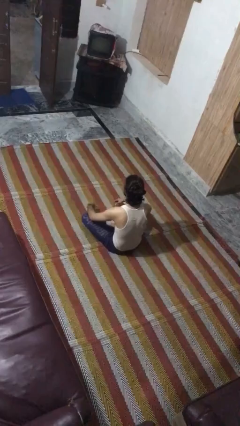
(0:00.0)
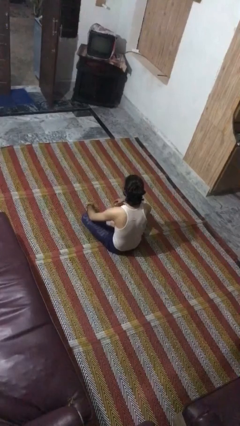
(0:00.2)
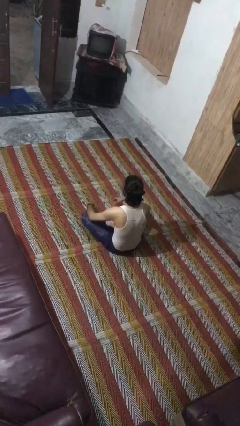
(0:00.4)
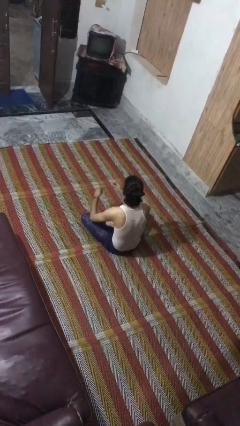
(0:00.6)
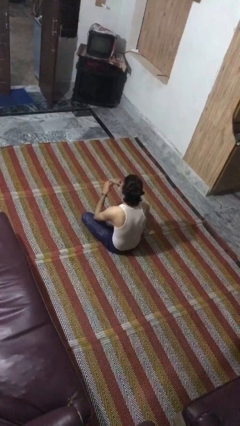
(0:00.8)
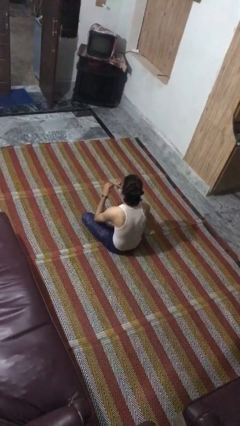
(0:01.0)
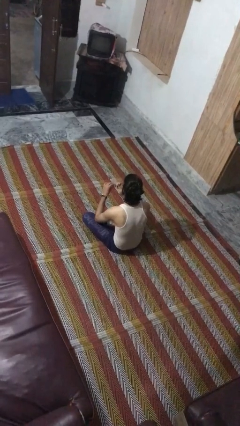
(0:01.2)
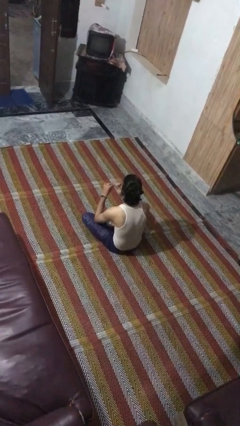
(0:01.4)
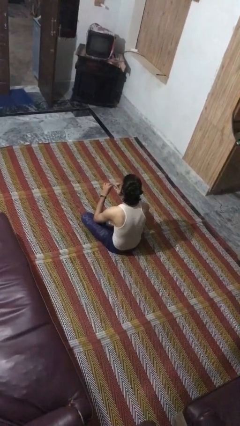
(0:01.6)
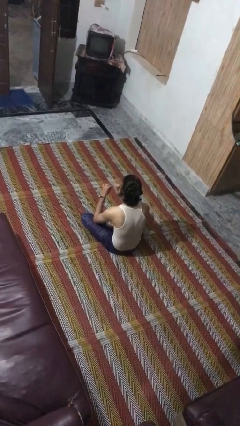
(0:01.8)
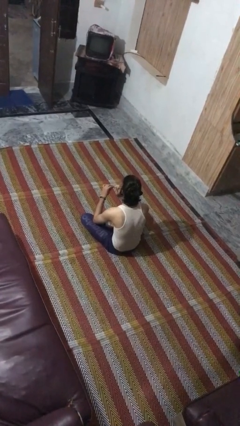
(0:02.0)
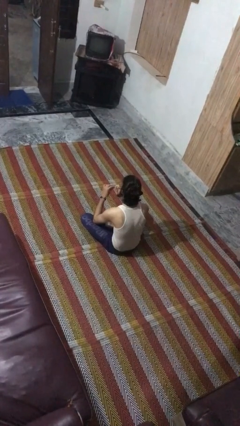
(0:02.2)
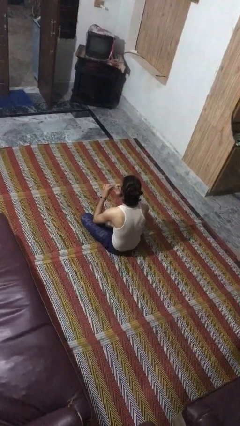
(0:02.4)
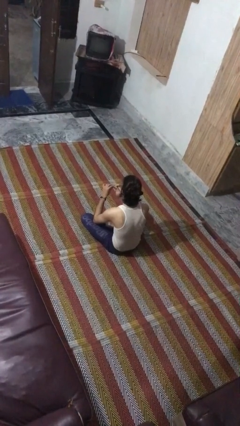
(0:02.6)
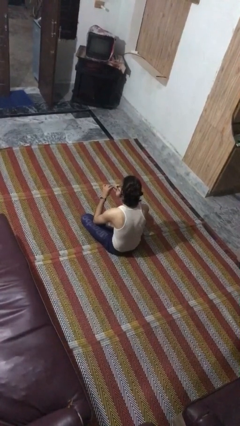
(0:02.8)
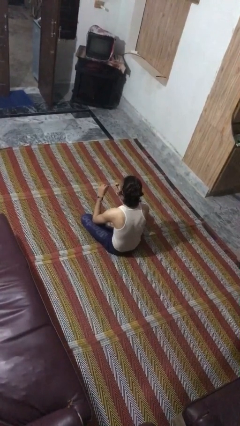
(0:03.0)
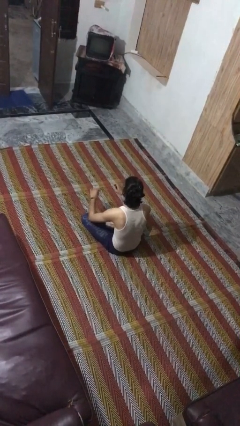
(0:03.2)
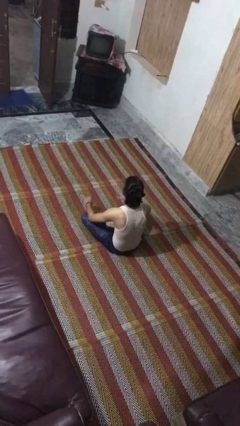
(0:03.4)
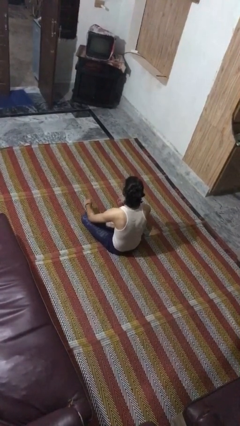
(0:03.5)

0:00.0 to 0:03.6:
person files fingernails

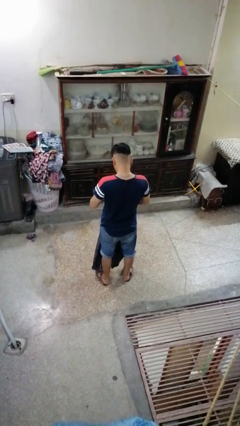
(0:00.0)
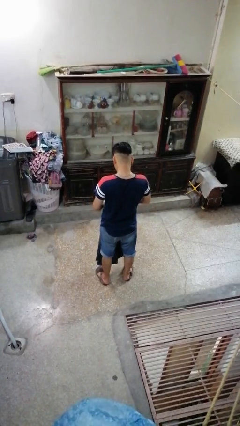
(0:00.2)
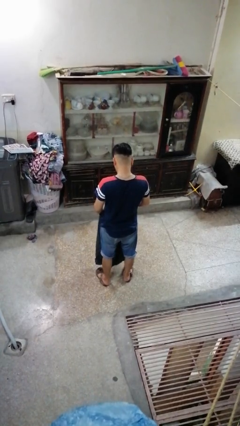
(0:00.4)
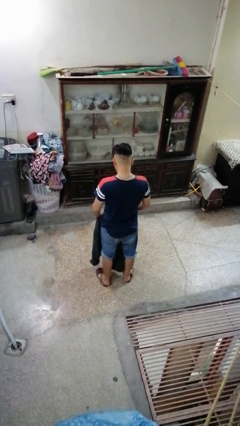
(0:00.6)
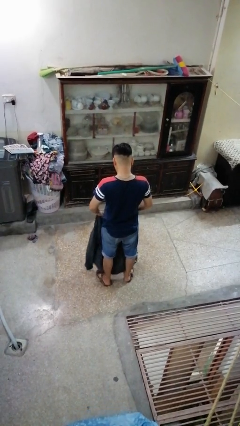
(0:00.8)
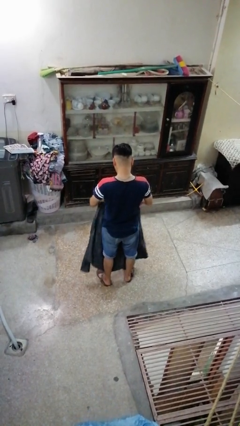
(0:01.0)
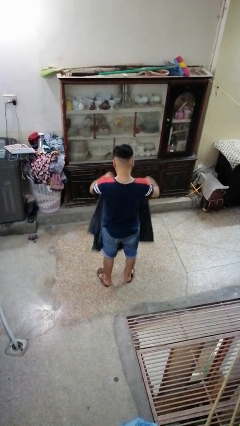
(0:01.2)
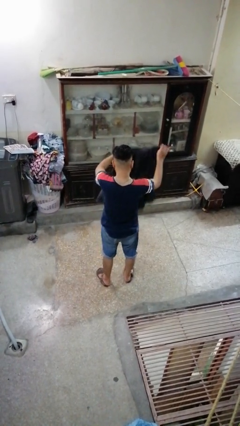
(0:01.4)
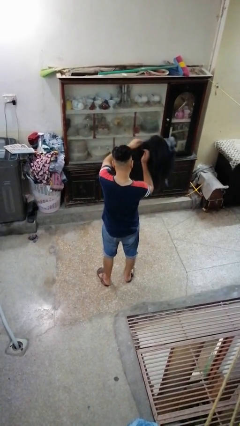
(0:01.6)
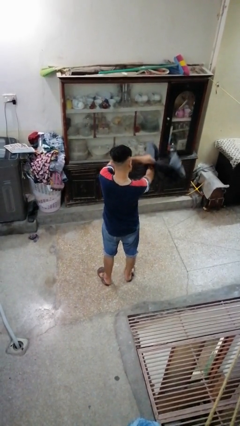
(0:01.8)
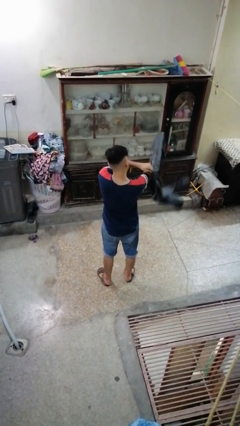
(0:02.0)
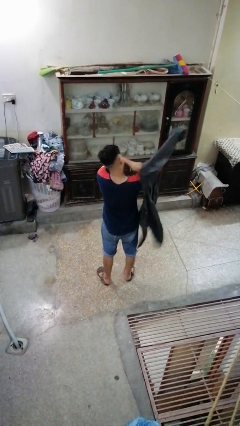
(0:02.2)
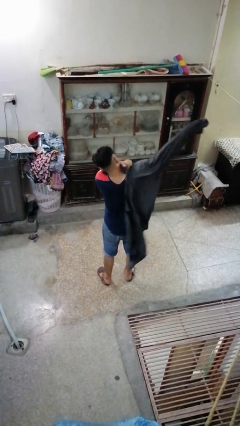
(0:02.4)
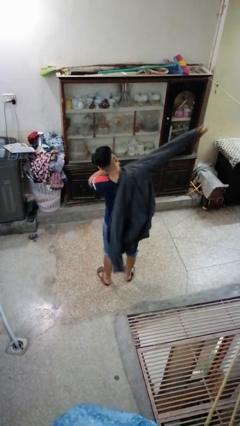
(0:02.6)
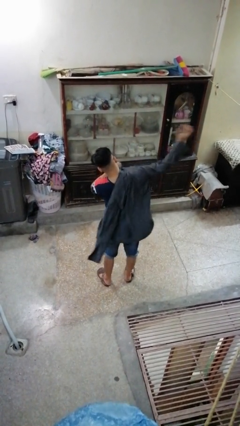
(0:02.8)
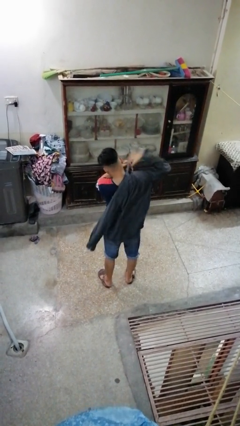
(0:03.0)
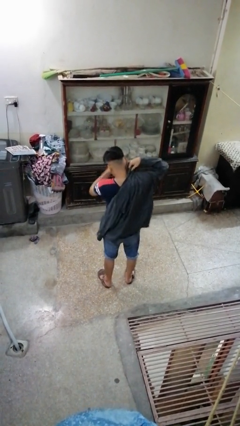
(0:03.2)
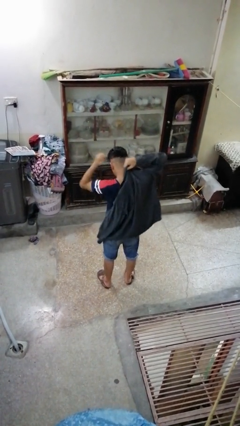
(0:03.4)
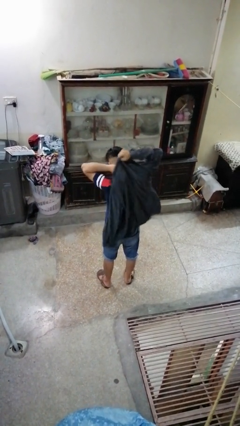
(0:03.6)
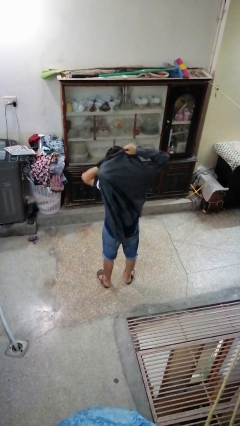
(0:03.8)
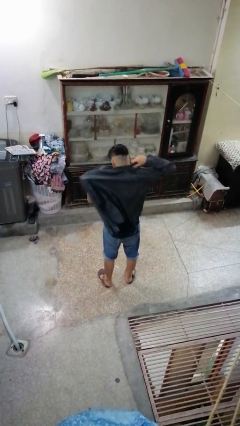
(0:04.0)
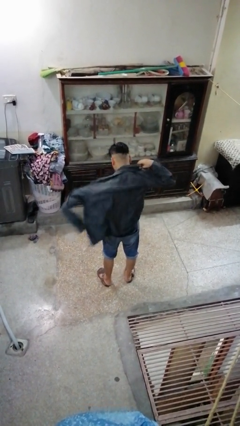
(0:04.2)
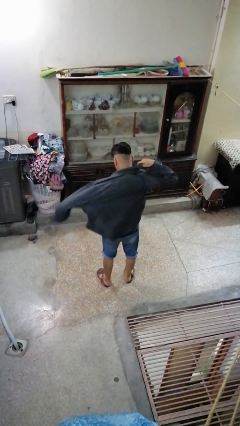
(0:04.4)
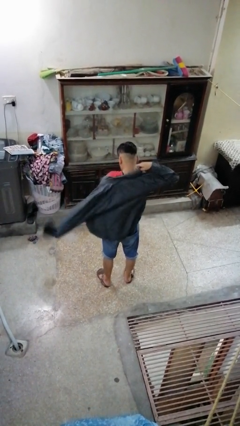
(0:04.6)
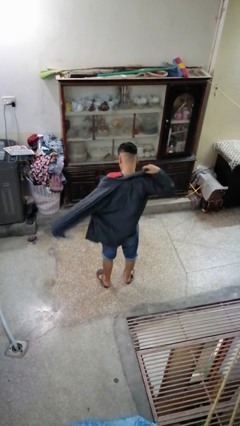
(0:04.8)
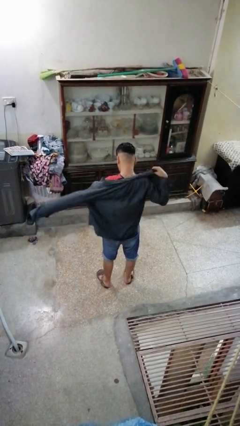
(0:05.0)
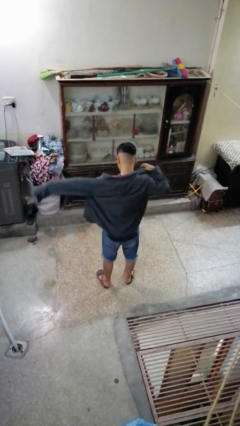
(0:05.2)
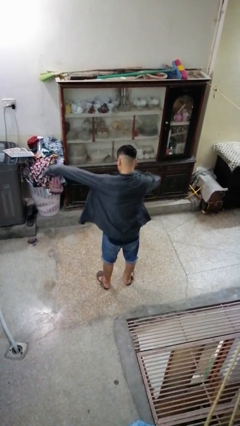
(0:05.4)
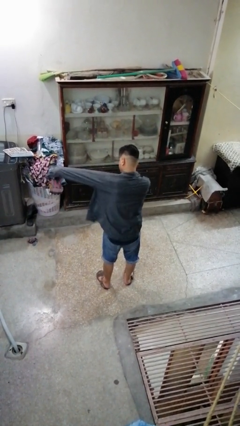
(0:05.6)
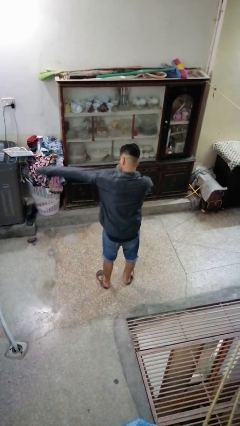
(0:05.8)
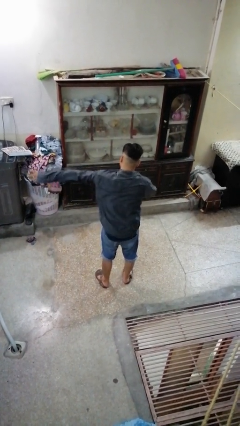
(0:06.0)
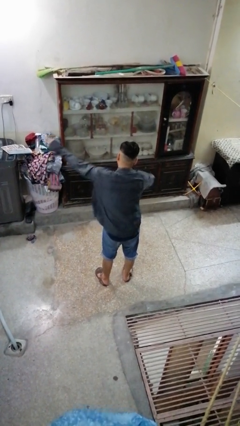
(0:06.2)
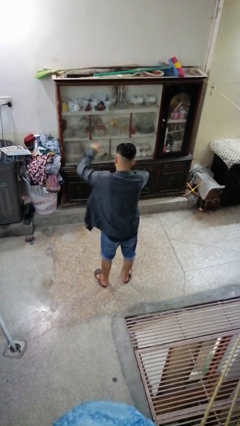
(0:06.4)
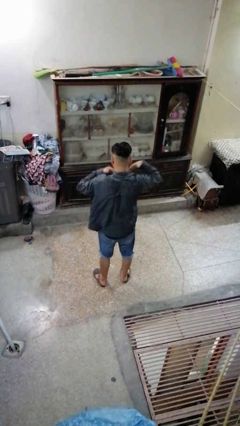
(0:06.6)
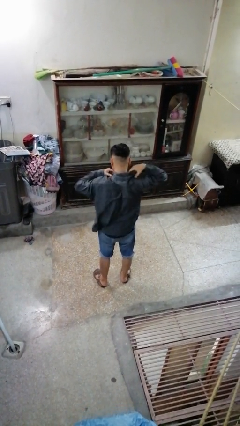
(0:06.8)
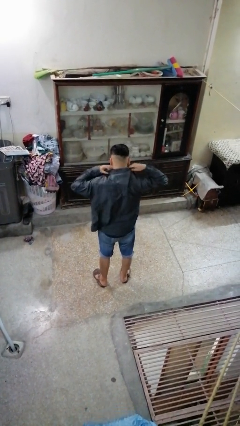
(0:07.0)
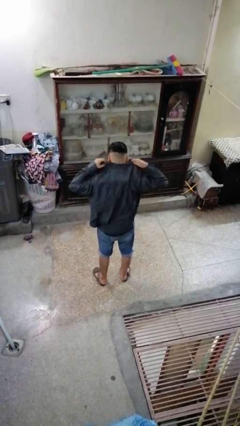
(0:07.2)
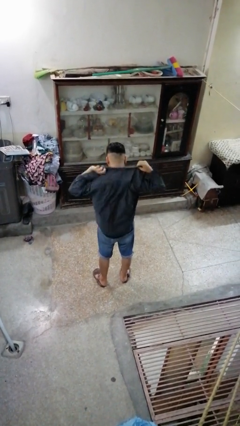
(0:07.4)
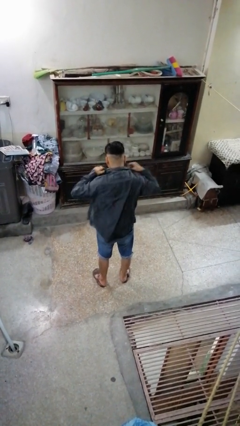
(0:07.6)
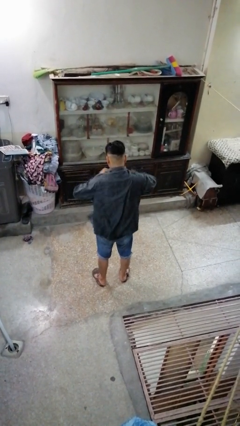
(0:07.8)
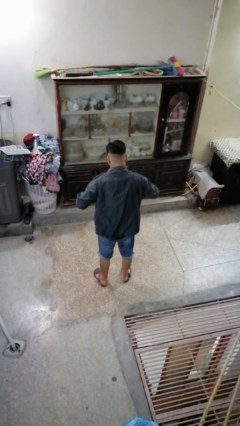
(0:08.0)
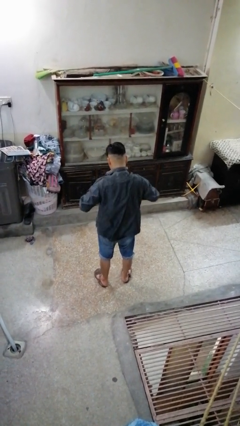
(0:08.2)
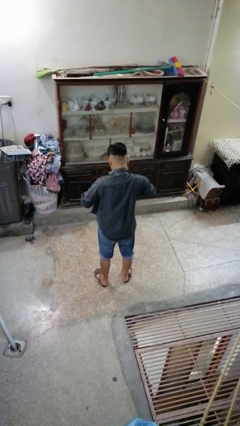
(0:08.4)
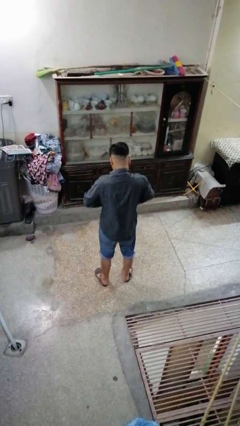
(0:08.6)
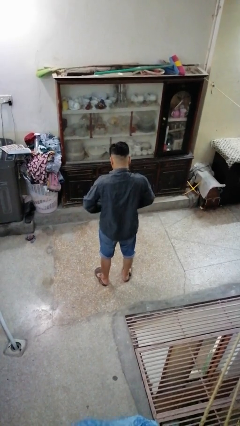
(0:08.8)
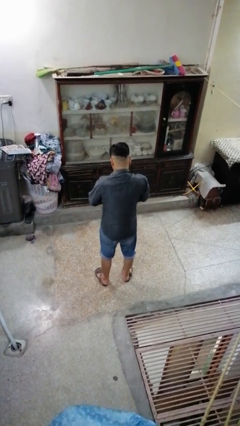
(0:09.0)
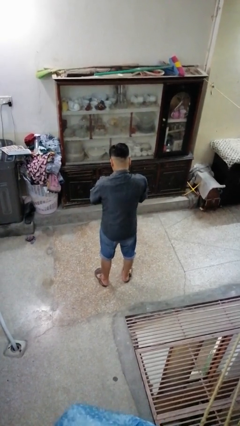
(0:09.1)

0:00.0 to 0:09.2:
person puts on shirt

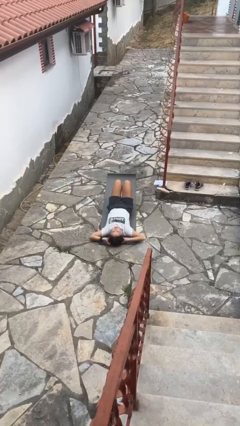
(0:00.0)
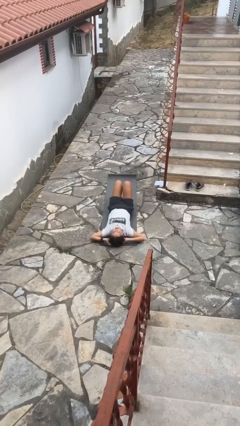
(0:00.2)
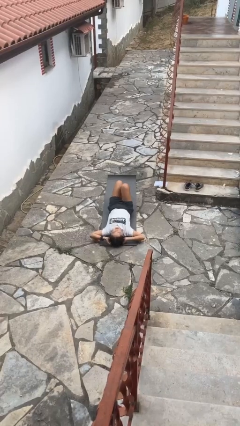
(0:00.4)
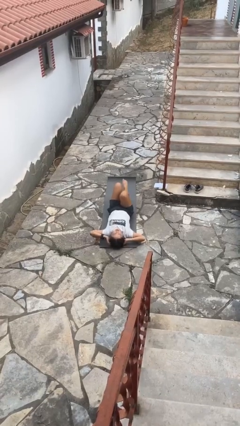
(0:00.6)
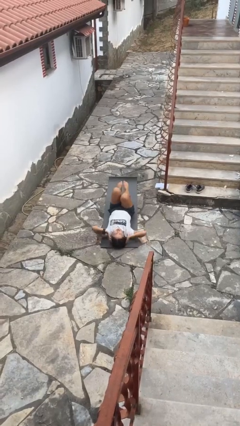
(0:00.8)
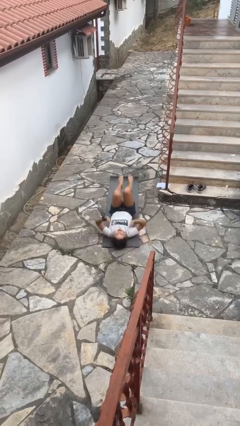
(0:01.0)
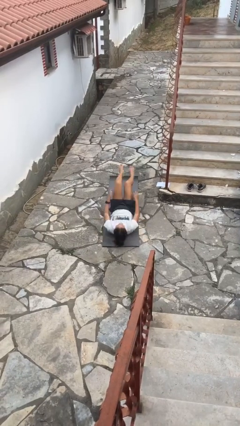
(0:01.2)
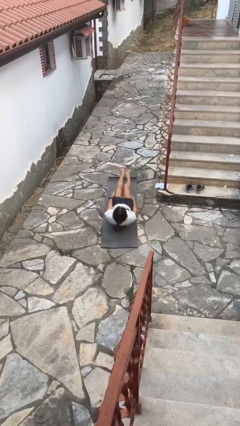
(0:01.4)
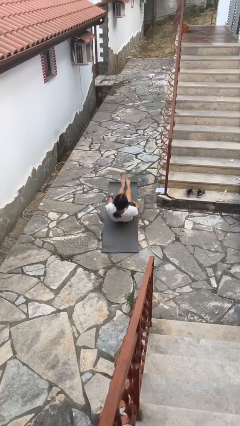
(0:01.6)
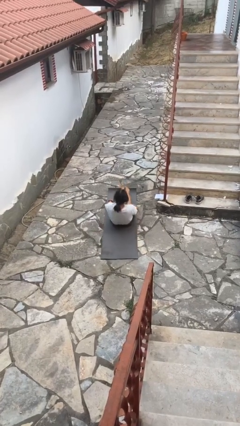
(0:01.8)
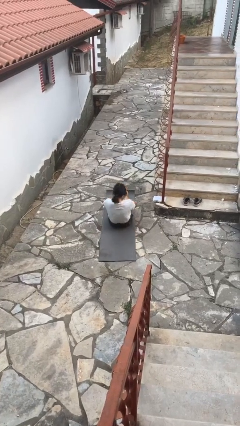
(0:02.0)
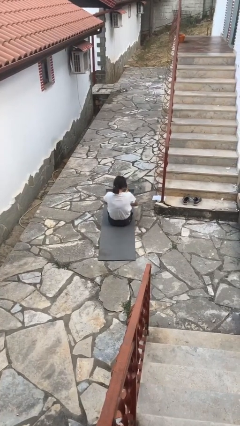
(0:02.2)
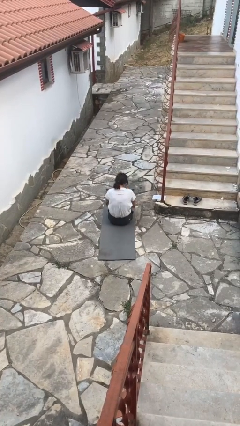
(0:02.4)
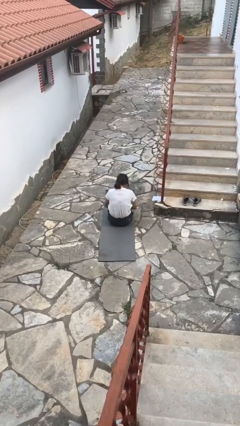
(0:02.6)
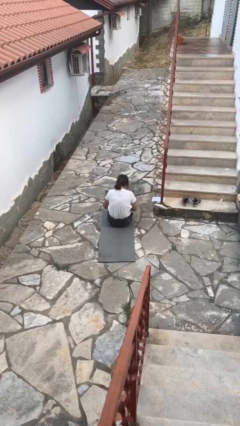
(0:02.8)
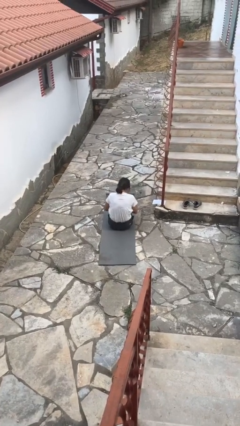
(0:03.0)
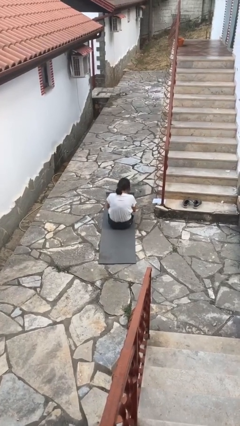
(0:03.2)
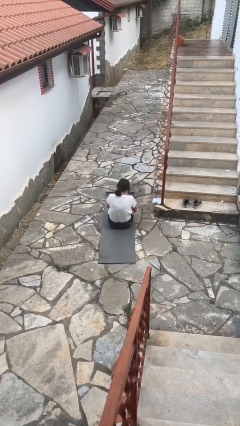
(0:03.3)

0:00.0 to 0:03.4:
person exercises with situp

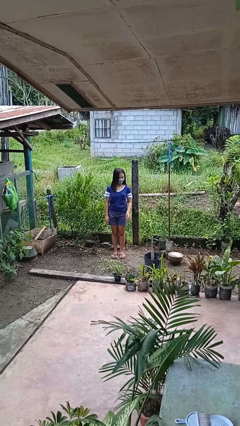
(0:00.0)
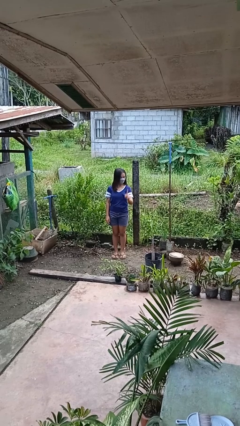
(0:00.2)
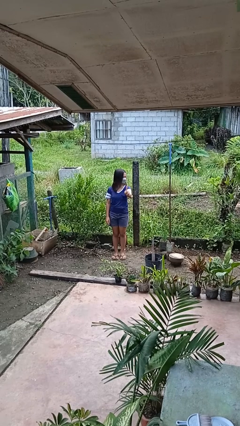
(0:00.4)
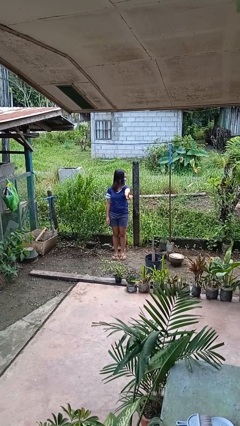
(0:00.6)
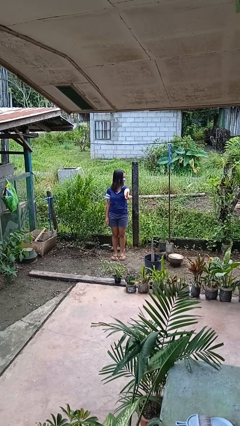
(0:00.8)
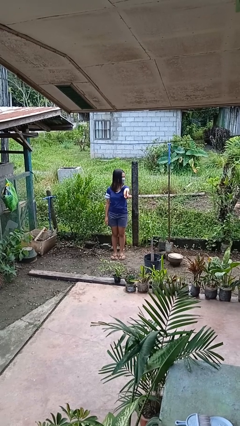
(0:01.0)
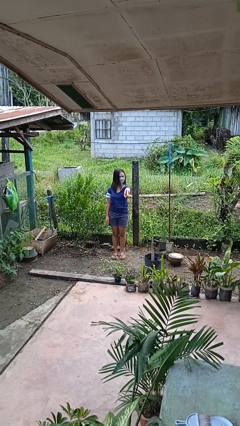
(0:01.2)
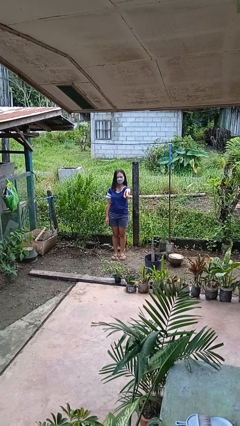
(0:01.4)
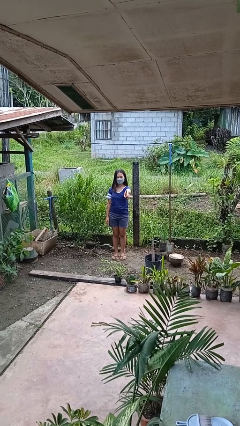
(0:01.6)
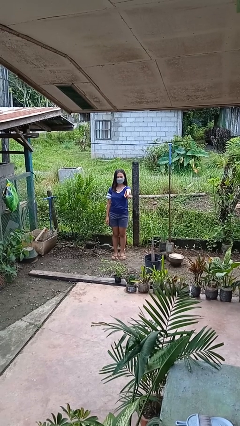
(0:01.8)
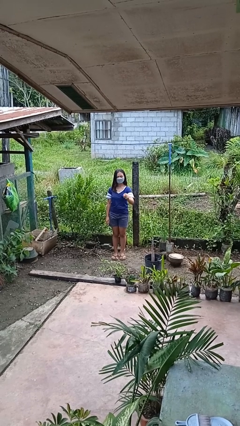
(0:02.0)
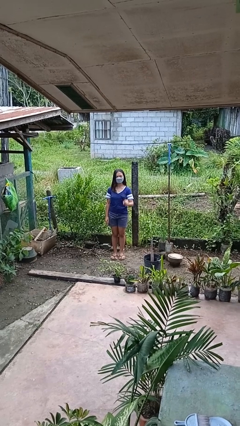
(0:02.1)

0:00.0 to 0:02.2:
person gestures number one
